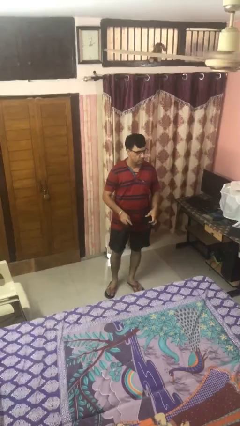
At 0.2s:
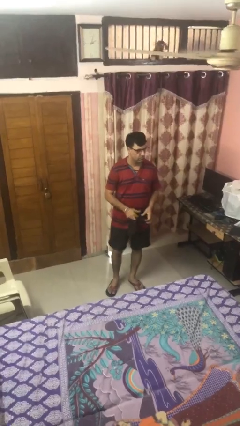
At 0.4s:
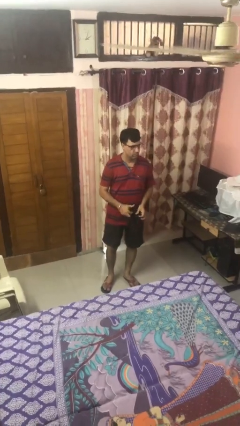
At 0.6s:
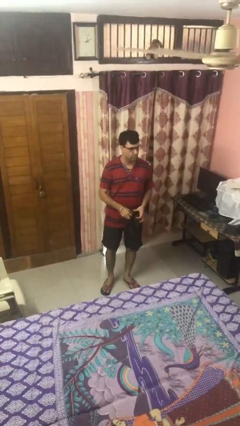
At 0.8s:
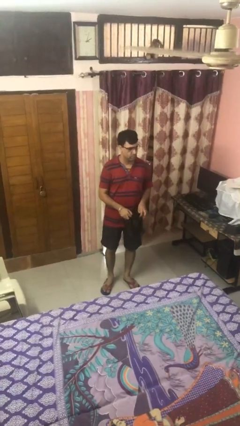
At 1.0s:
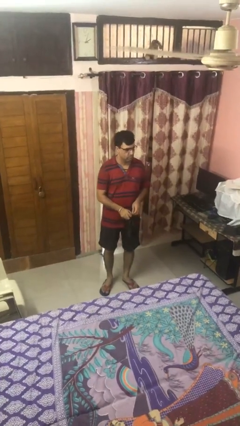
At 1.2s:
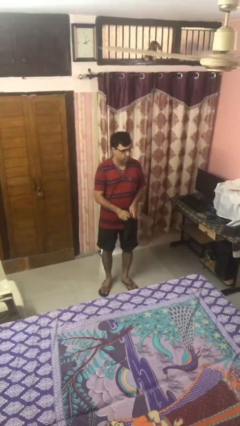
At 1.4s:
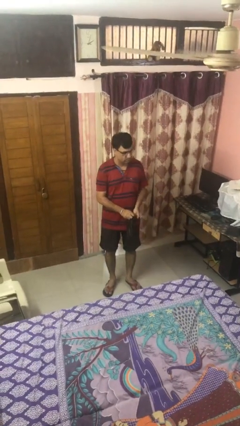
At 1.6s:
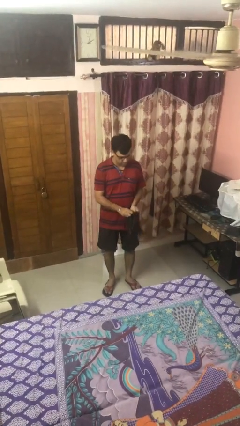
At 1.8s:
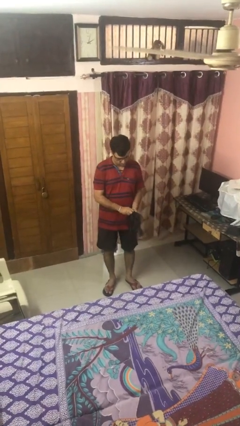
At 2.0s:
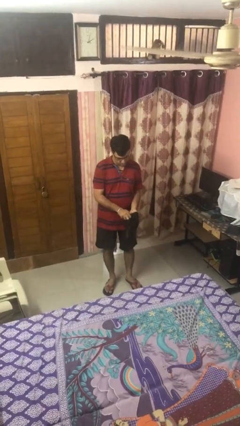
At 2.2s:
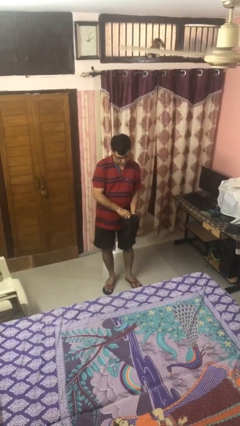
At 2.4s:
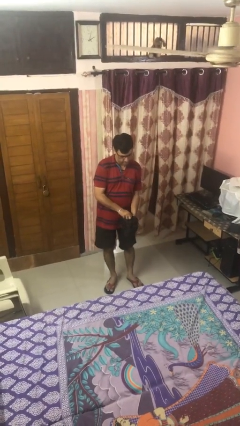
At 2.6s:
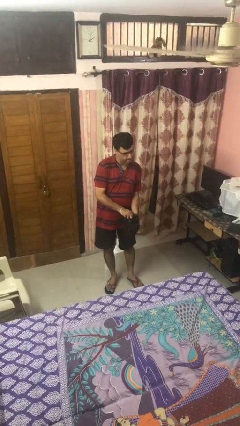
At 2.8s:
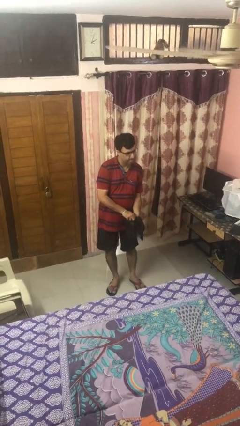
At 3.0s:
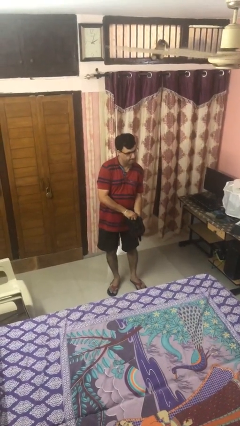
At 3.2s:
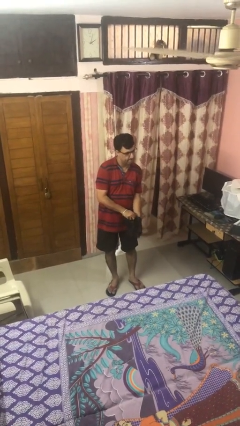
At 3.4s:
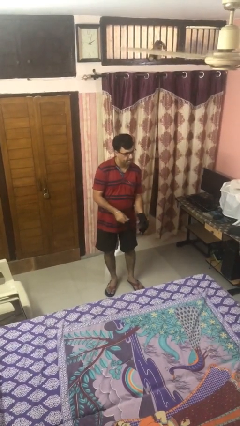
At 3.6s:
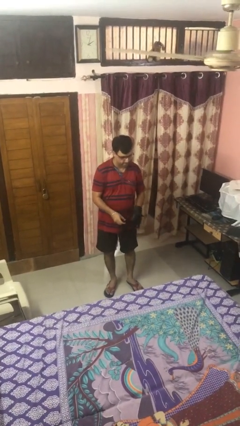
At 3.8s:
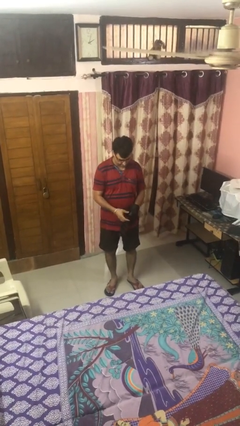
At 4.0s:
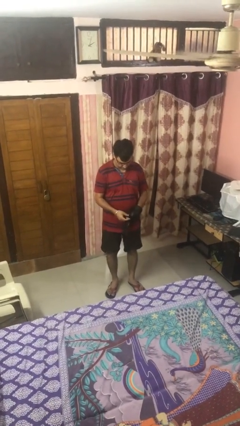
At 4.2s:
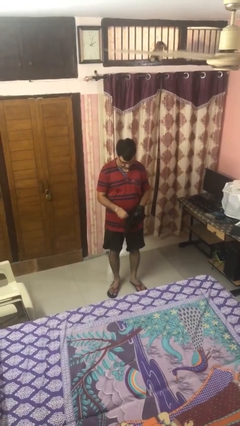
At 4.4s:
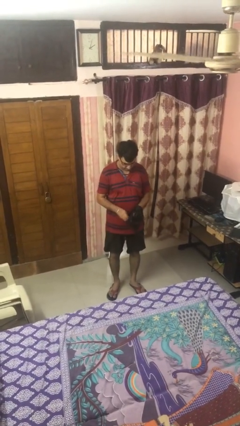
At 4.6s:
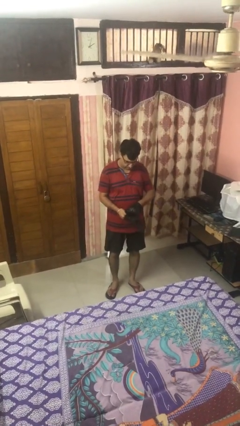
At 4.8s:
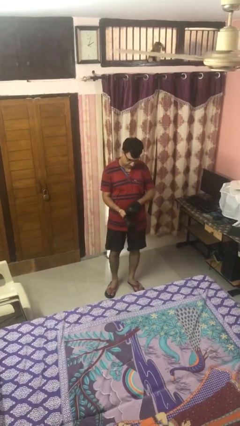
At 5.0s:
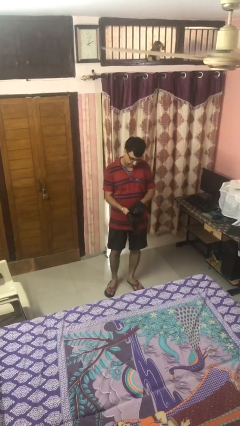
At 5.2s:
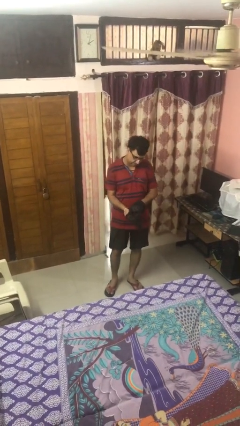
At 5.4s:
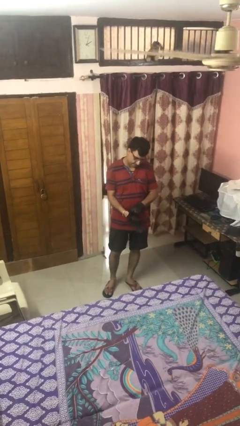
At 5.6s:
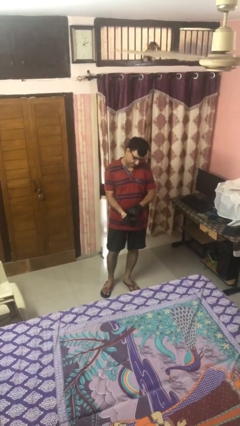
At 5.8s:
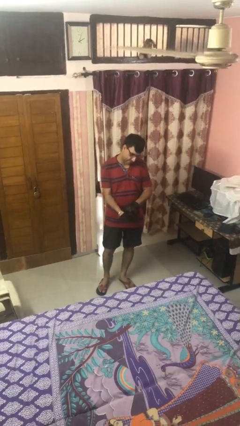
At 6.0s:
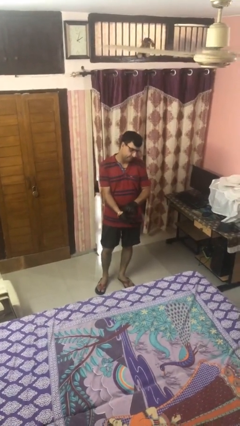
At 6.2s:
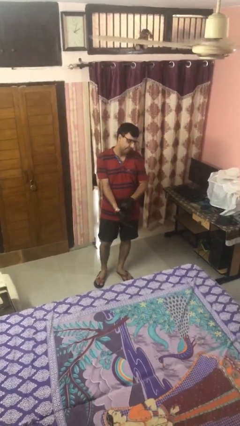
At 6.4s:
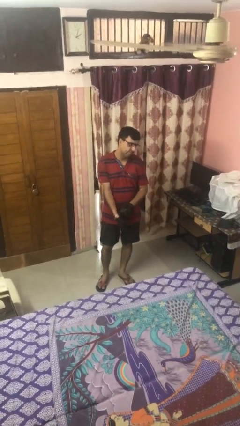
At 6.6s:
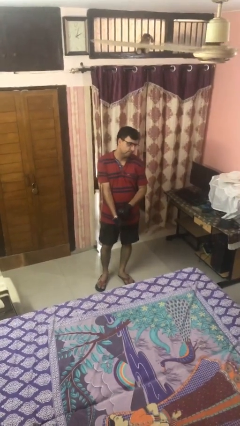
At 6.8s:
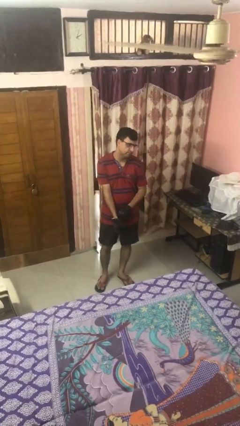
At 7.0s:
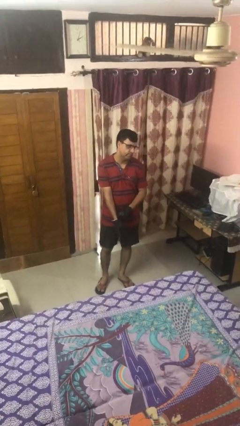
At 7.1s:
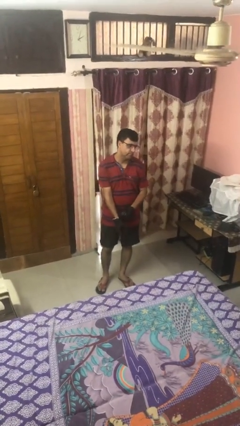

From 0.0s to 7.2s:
person puts on gloves

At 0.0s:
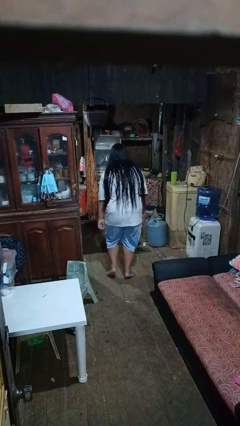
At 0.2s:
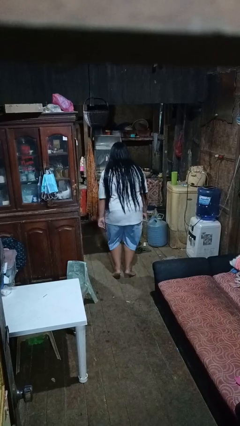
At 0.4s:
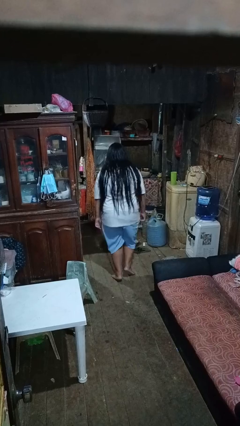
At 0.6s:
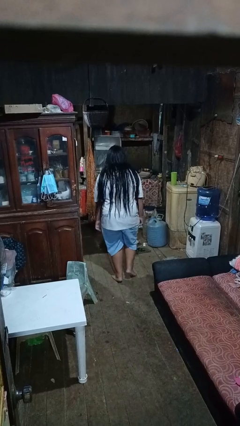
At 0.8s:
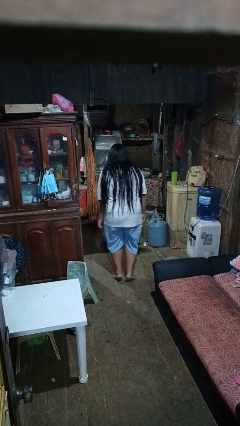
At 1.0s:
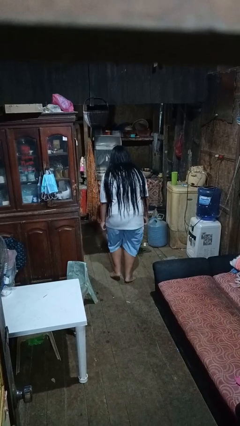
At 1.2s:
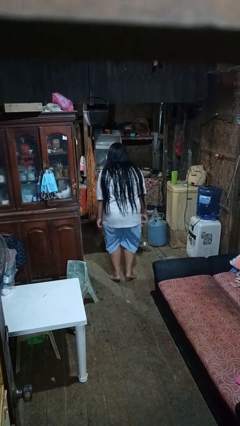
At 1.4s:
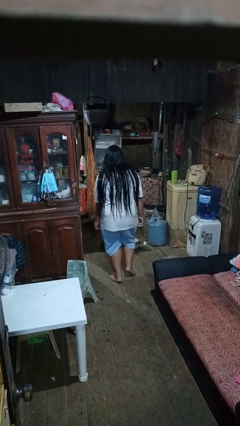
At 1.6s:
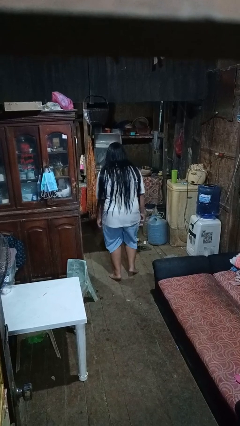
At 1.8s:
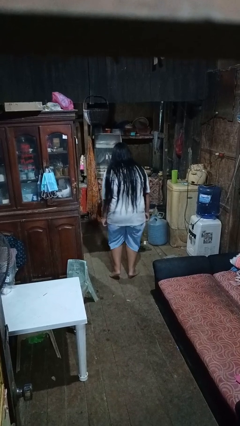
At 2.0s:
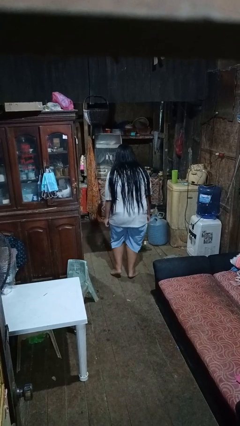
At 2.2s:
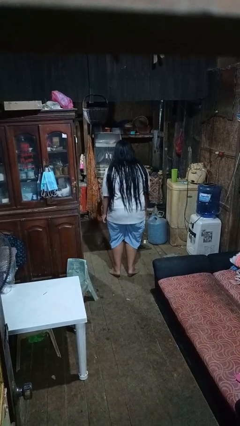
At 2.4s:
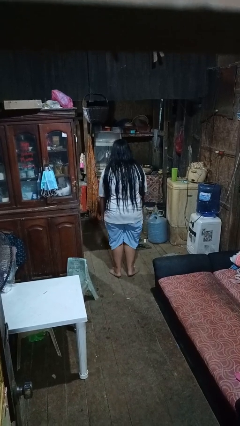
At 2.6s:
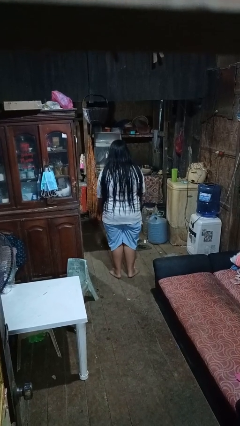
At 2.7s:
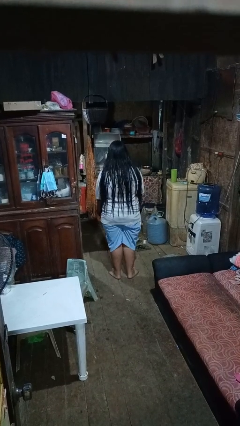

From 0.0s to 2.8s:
person walks tiptoe

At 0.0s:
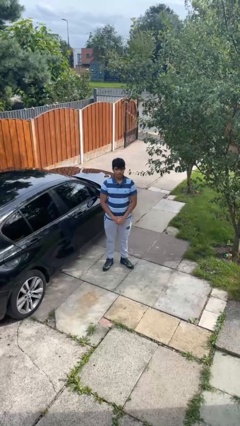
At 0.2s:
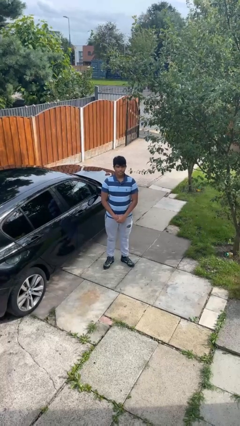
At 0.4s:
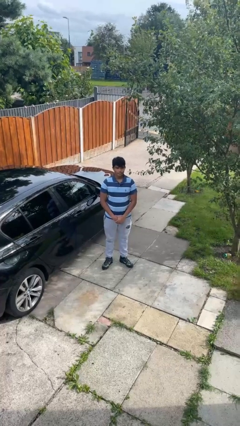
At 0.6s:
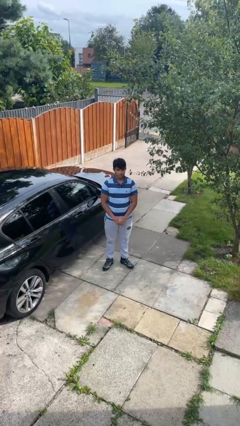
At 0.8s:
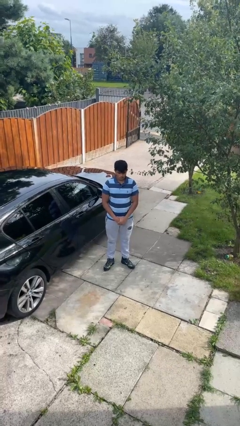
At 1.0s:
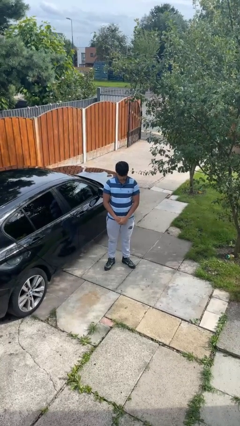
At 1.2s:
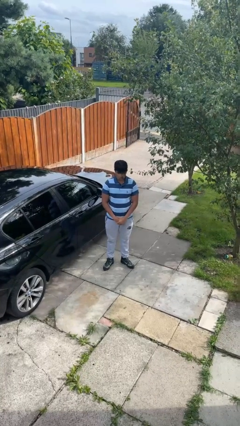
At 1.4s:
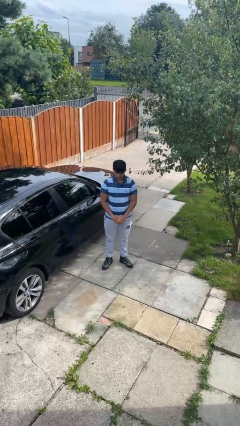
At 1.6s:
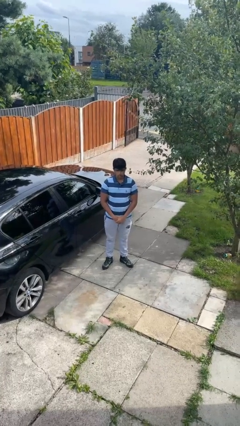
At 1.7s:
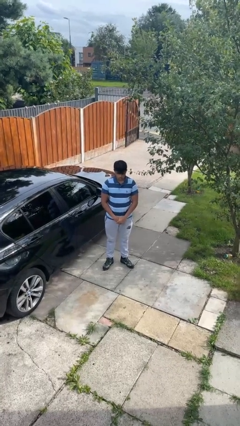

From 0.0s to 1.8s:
person nods head

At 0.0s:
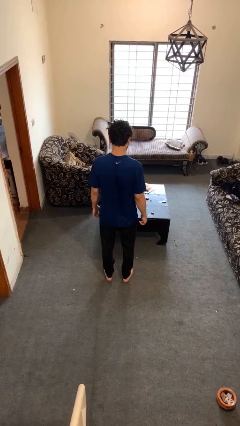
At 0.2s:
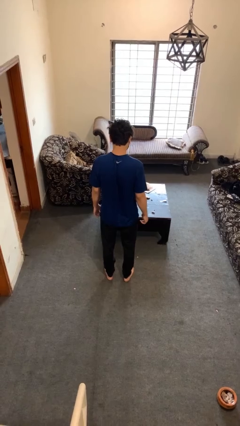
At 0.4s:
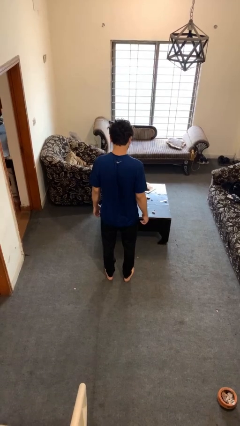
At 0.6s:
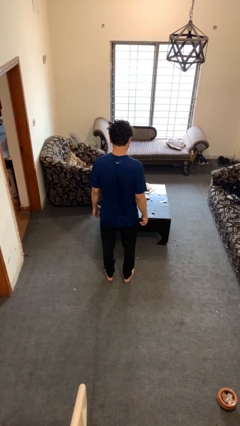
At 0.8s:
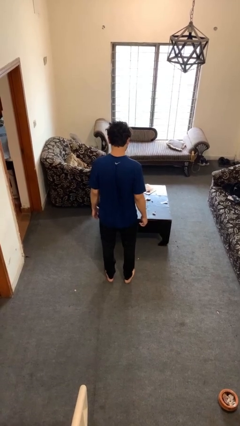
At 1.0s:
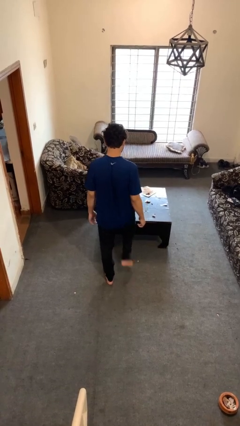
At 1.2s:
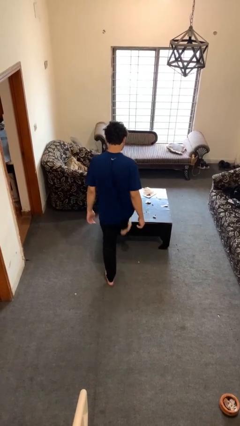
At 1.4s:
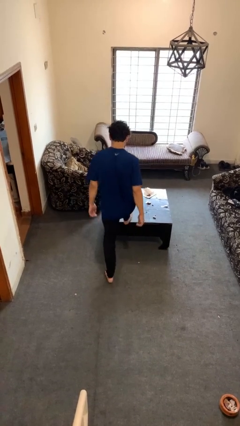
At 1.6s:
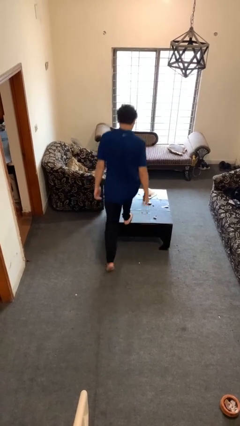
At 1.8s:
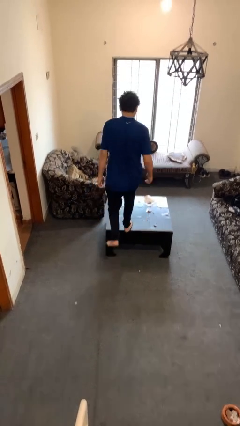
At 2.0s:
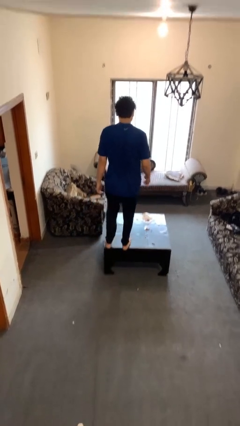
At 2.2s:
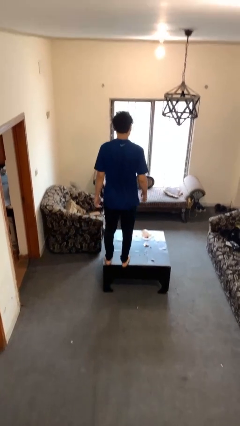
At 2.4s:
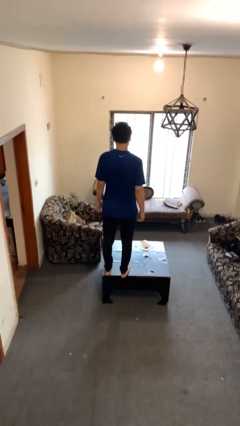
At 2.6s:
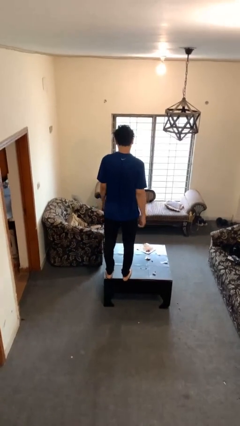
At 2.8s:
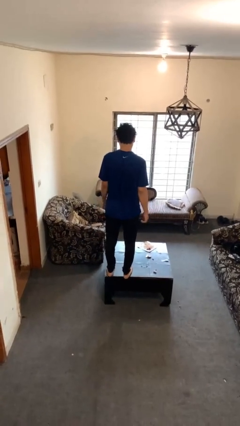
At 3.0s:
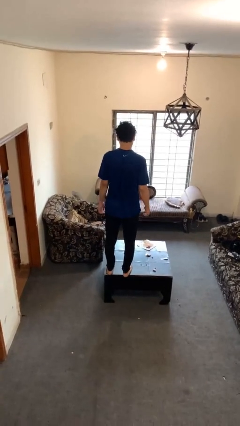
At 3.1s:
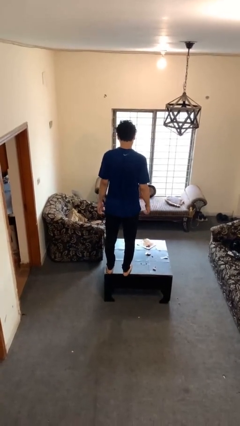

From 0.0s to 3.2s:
person climbs on table

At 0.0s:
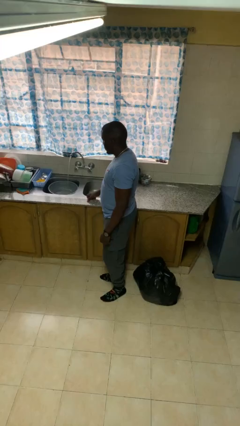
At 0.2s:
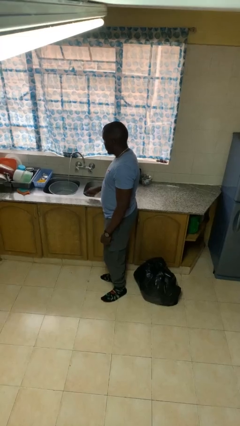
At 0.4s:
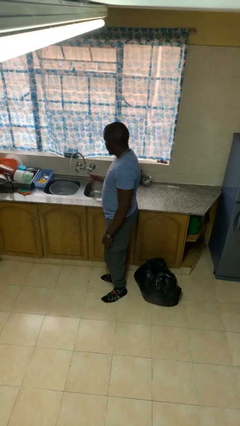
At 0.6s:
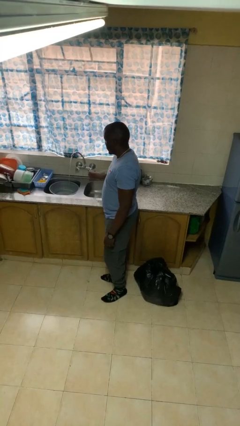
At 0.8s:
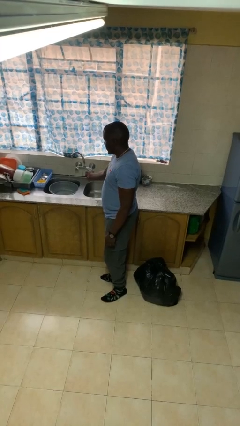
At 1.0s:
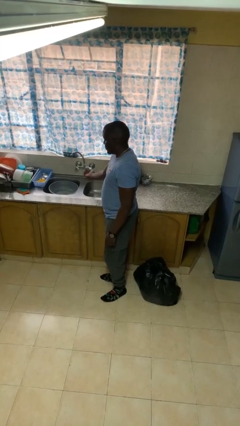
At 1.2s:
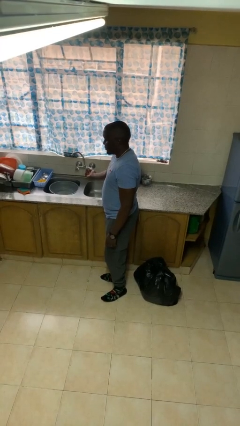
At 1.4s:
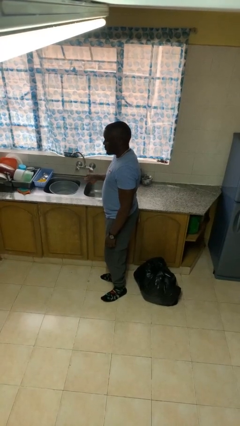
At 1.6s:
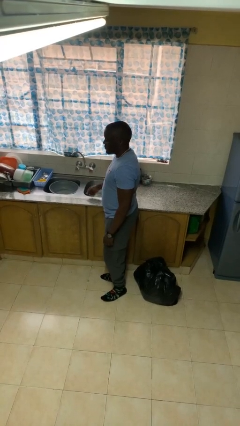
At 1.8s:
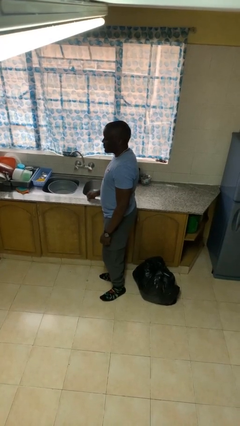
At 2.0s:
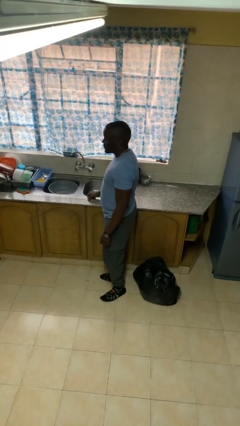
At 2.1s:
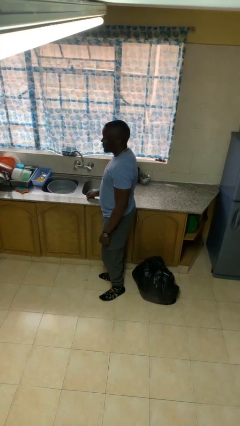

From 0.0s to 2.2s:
person turns off faucet

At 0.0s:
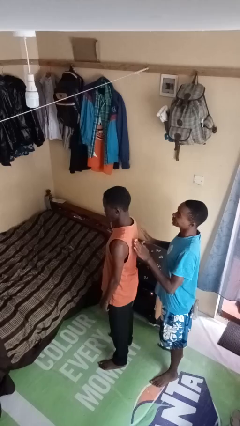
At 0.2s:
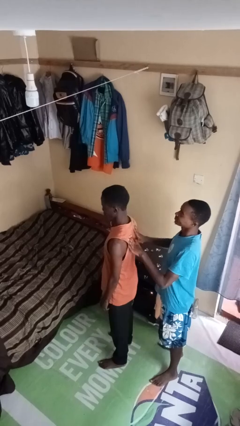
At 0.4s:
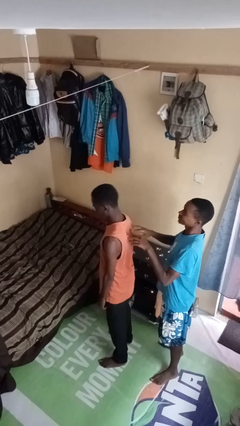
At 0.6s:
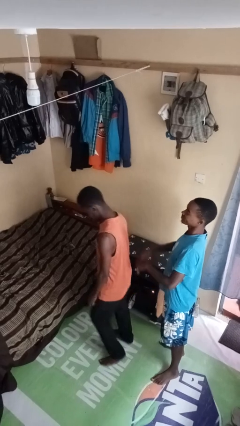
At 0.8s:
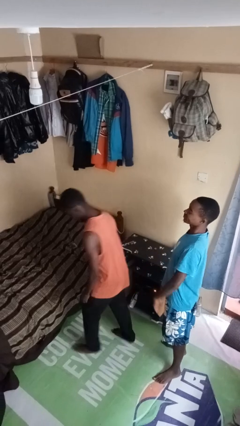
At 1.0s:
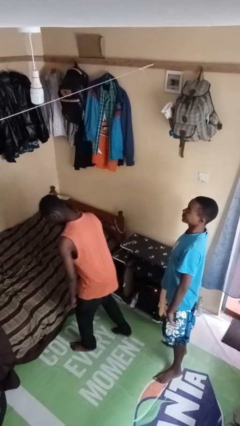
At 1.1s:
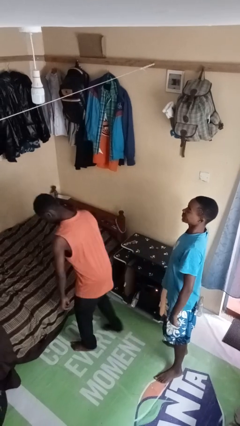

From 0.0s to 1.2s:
person shoves person
